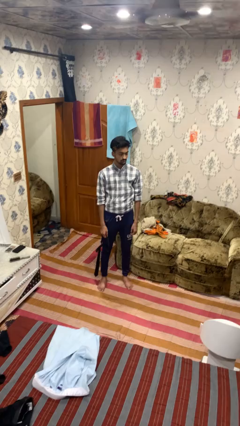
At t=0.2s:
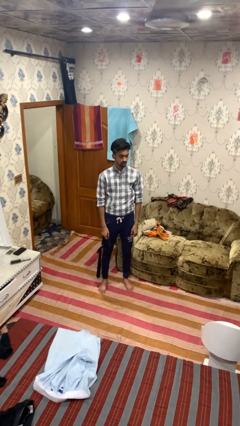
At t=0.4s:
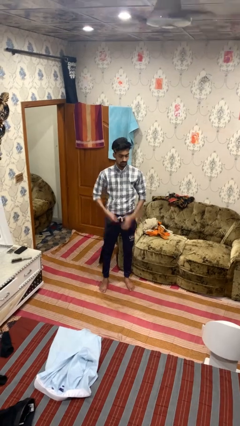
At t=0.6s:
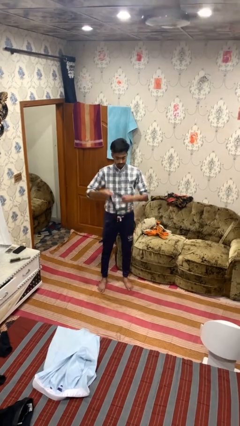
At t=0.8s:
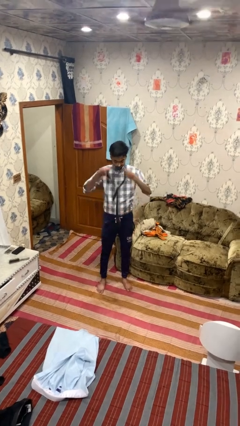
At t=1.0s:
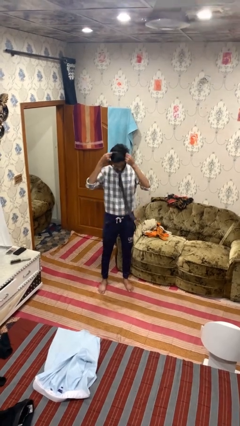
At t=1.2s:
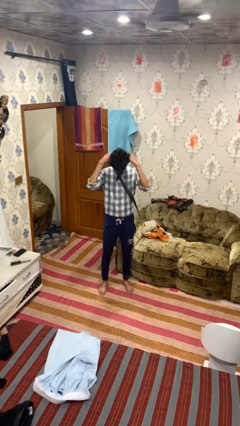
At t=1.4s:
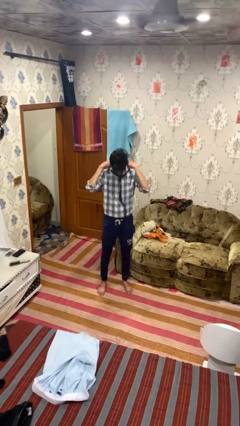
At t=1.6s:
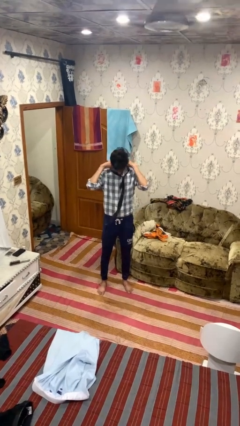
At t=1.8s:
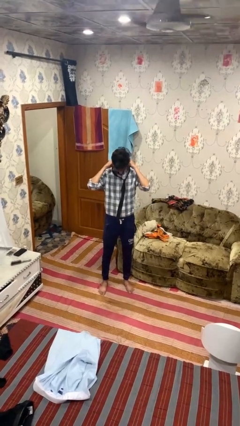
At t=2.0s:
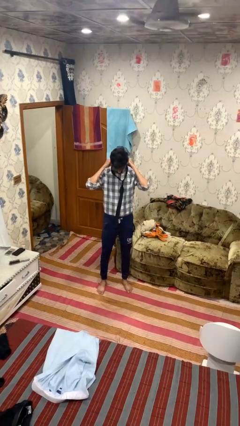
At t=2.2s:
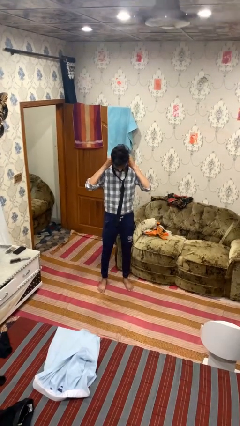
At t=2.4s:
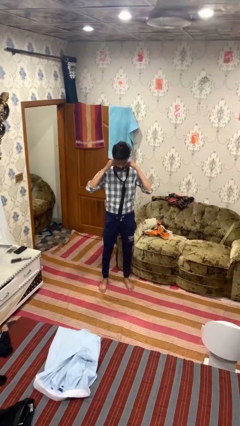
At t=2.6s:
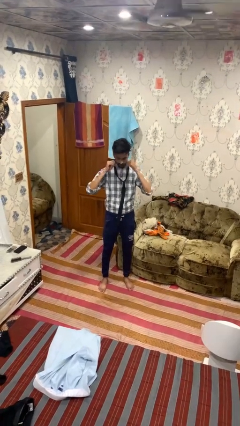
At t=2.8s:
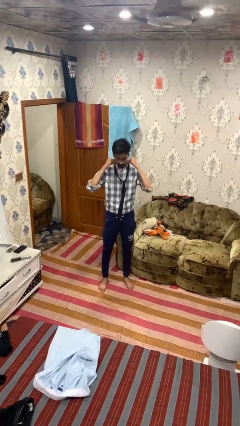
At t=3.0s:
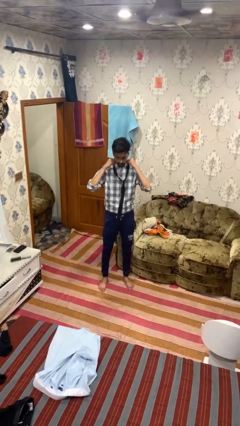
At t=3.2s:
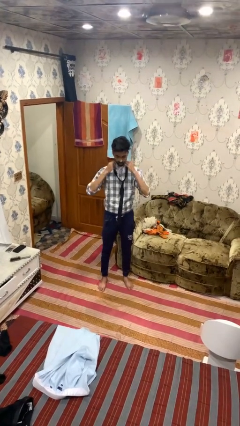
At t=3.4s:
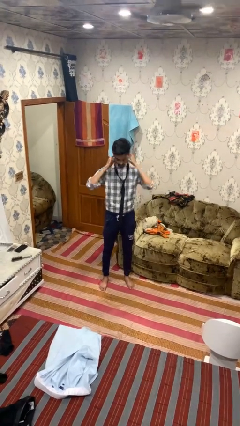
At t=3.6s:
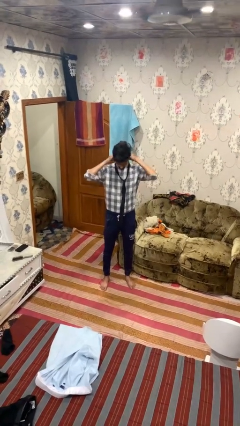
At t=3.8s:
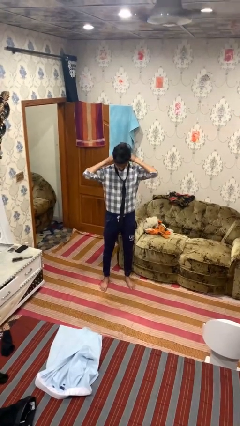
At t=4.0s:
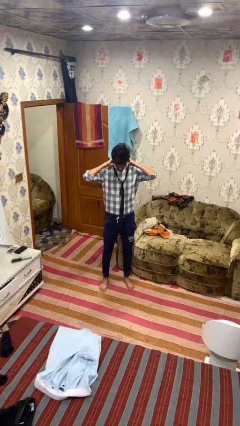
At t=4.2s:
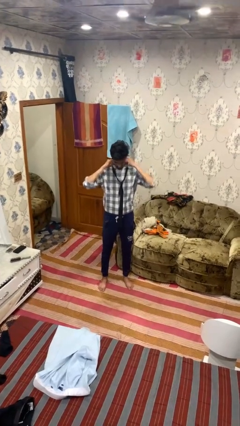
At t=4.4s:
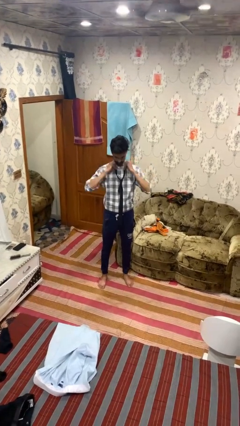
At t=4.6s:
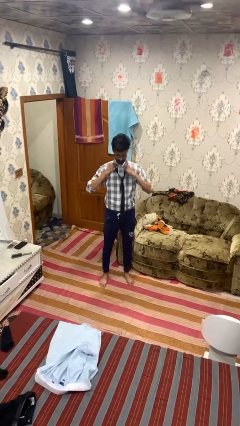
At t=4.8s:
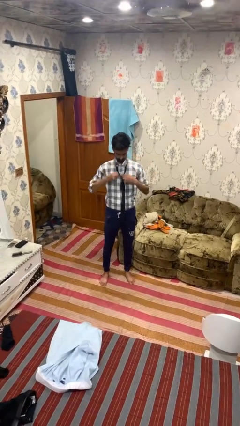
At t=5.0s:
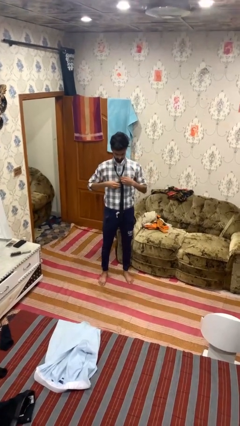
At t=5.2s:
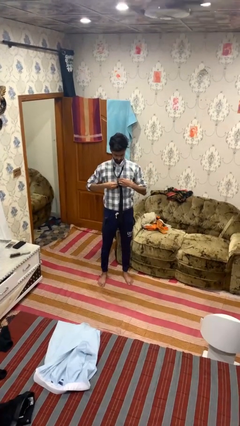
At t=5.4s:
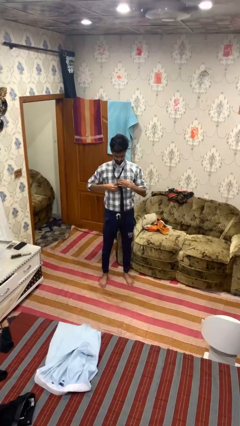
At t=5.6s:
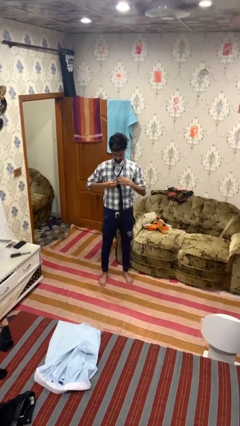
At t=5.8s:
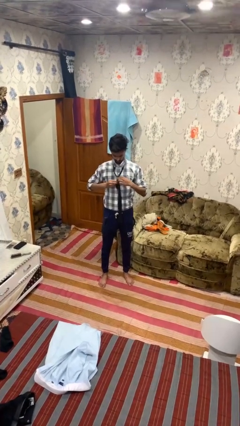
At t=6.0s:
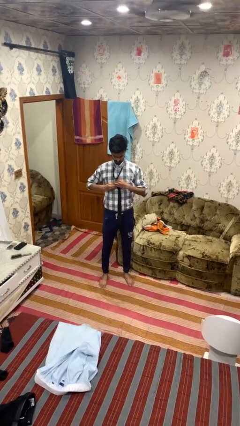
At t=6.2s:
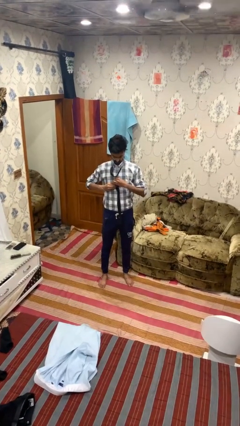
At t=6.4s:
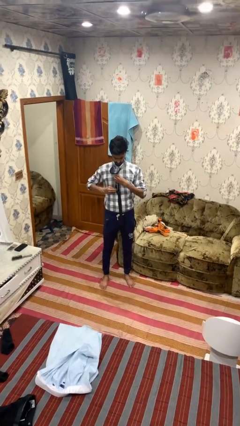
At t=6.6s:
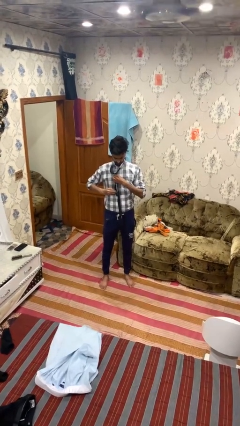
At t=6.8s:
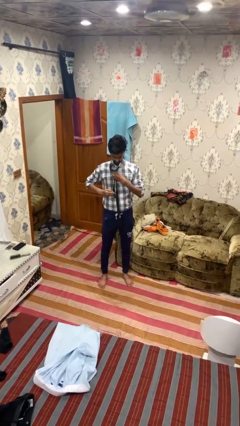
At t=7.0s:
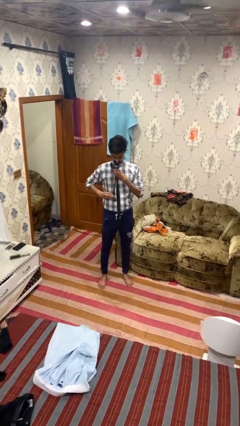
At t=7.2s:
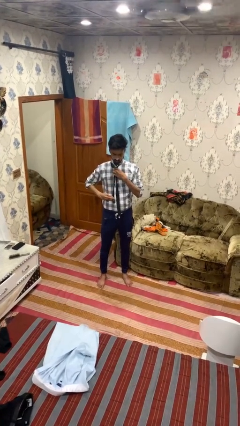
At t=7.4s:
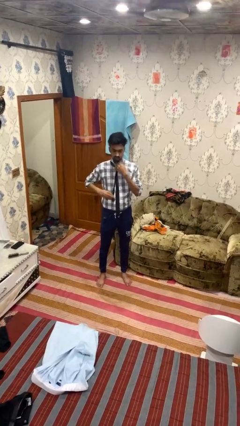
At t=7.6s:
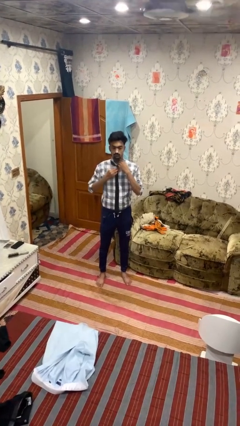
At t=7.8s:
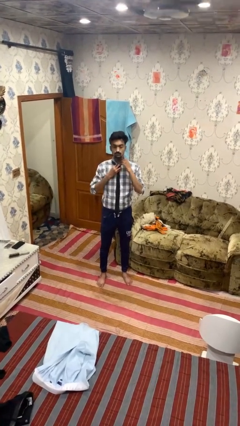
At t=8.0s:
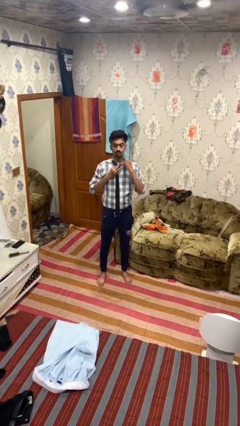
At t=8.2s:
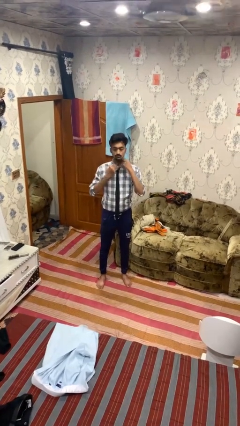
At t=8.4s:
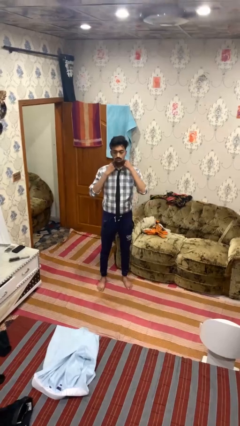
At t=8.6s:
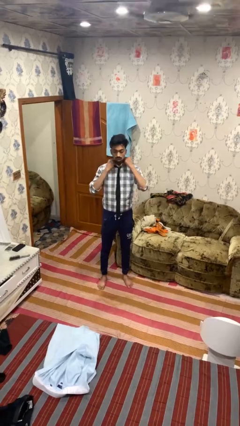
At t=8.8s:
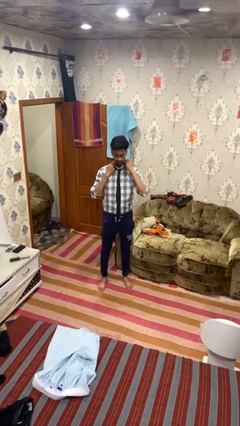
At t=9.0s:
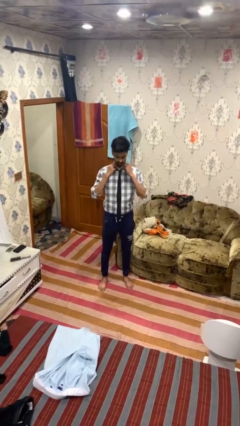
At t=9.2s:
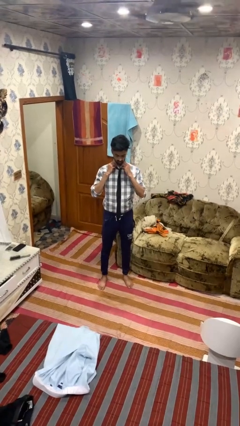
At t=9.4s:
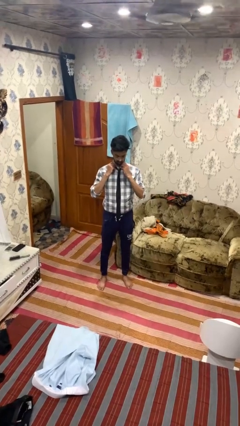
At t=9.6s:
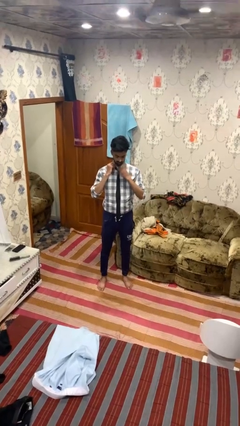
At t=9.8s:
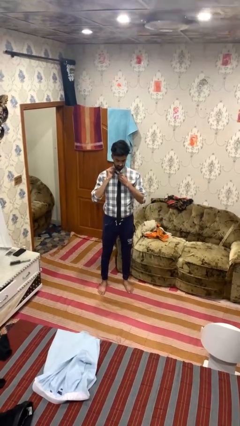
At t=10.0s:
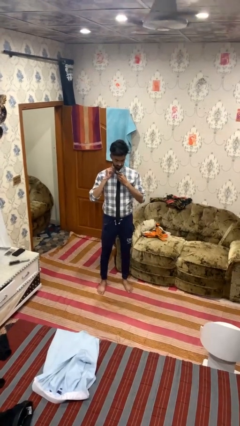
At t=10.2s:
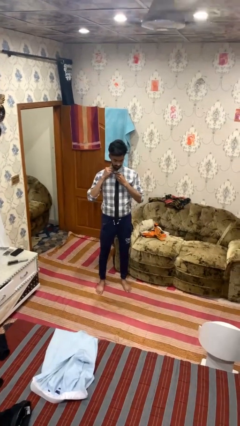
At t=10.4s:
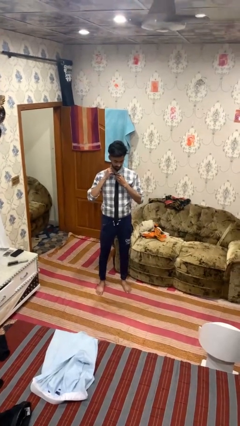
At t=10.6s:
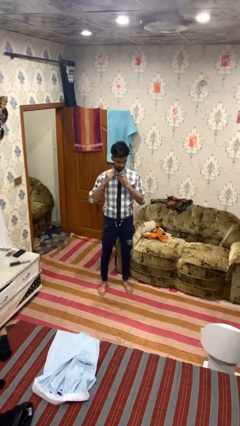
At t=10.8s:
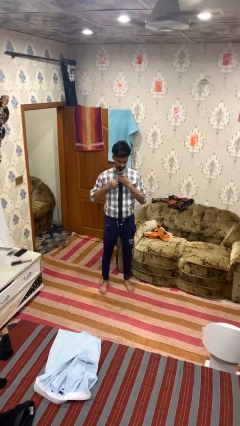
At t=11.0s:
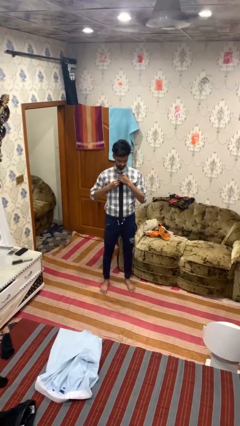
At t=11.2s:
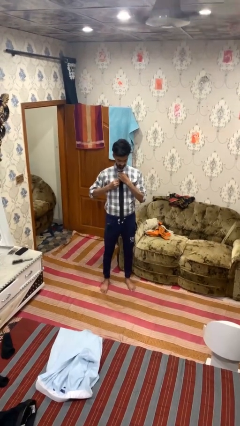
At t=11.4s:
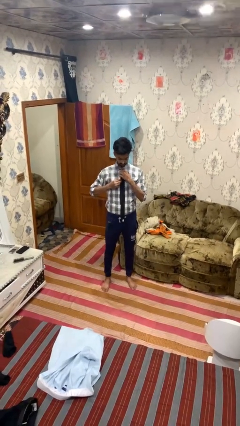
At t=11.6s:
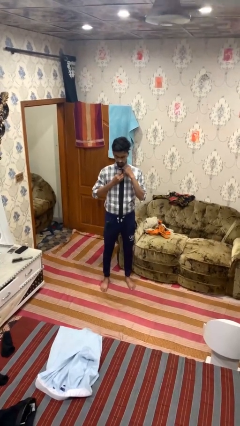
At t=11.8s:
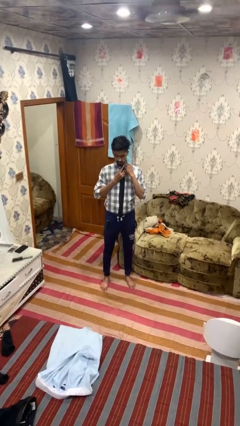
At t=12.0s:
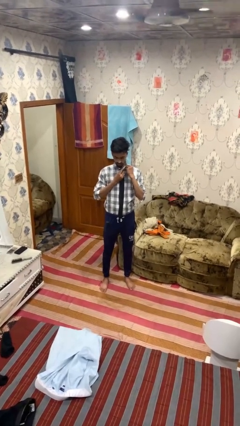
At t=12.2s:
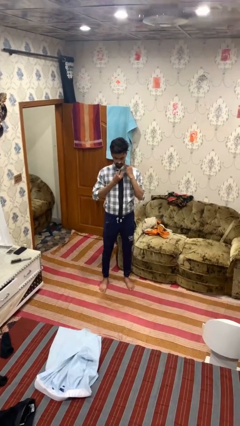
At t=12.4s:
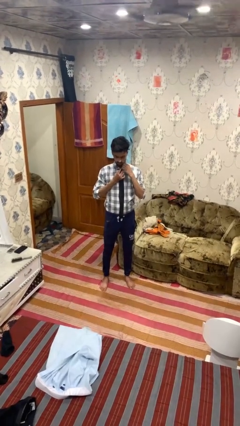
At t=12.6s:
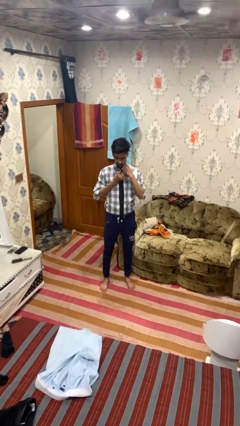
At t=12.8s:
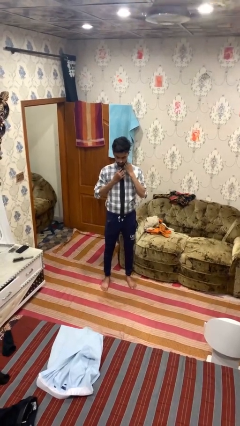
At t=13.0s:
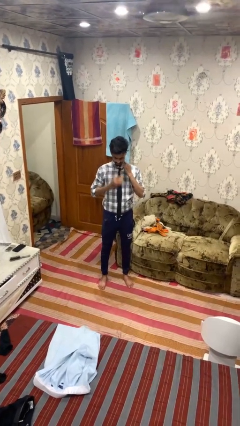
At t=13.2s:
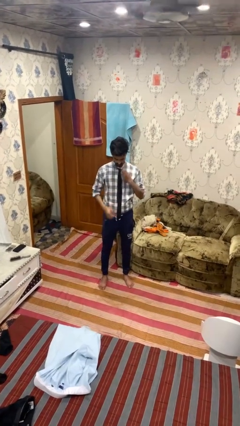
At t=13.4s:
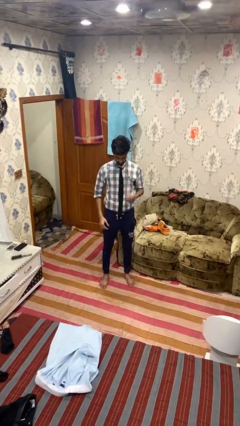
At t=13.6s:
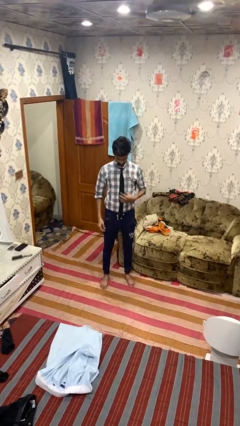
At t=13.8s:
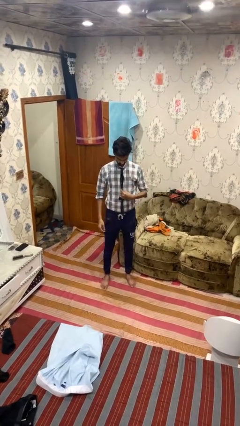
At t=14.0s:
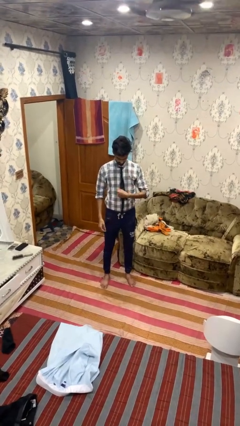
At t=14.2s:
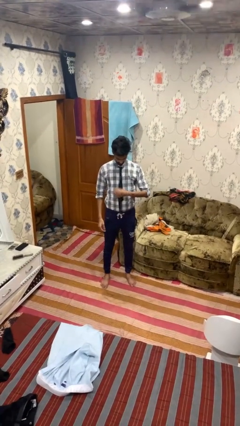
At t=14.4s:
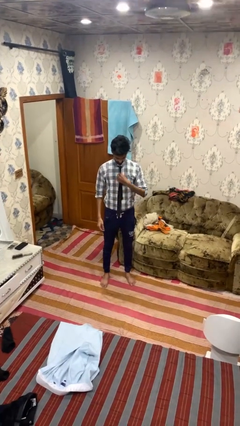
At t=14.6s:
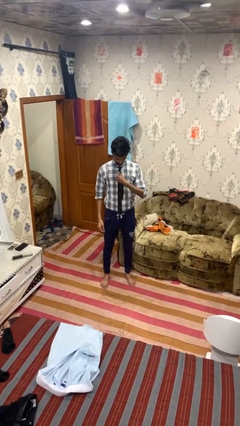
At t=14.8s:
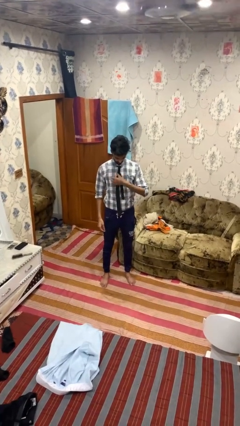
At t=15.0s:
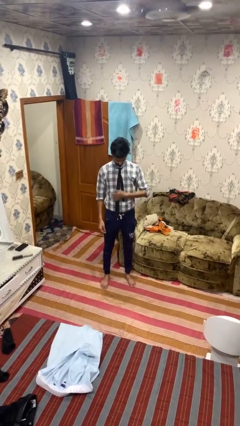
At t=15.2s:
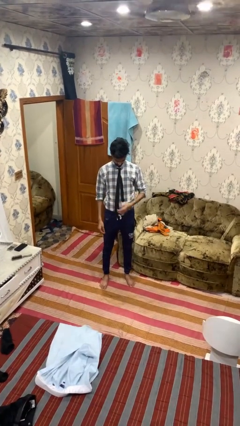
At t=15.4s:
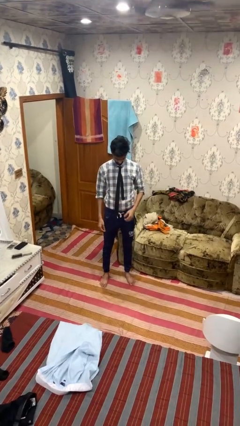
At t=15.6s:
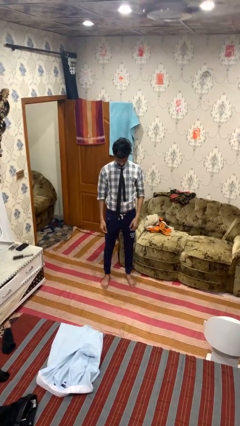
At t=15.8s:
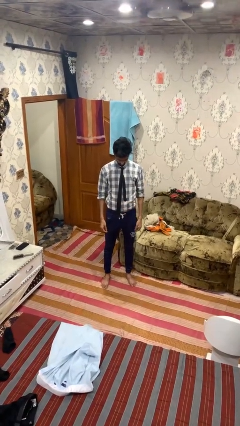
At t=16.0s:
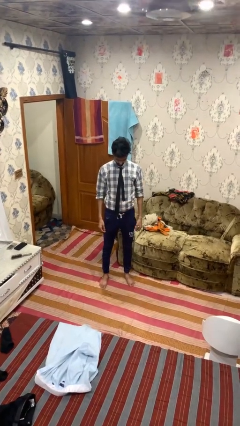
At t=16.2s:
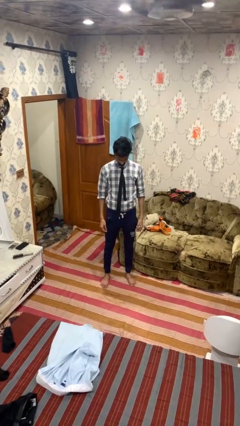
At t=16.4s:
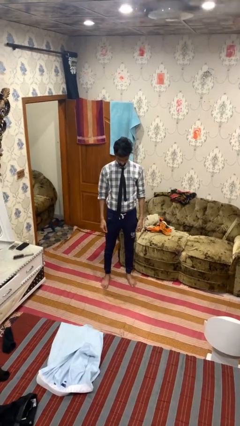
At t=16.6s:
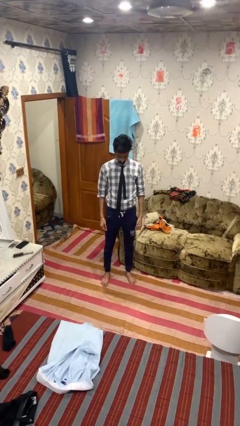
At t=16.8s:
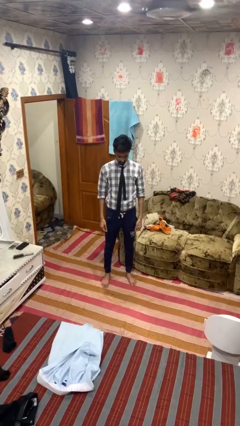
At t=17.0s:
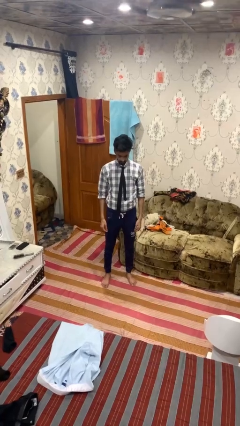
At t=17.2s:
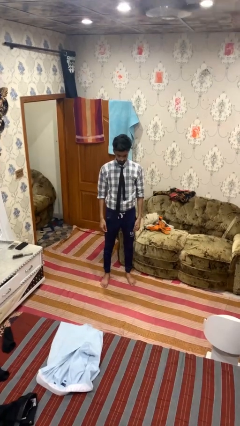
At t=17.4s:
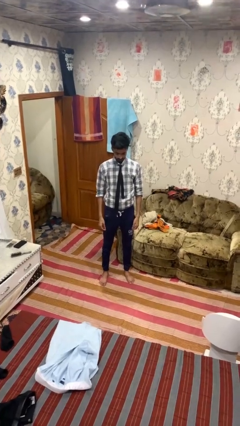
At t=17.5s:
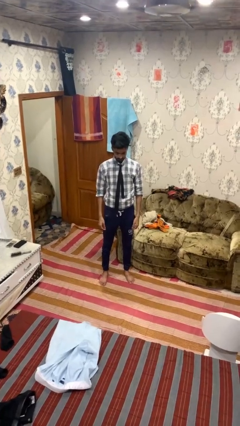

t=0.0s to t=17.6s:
person puts on necktie

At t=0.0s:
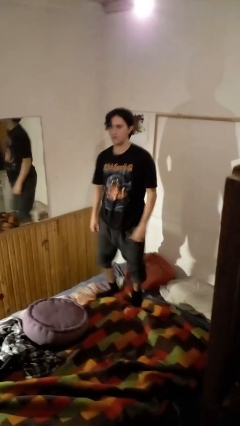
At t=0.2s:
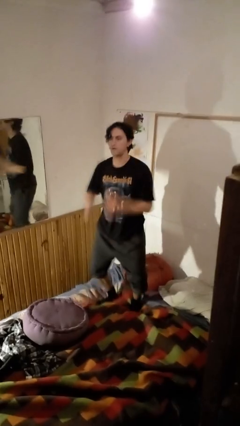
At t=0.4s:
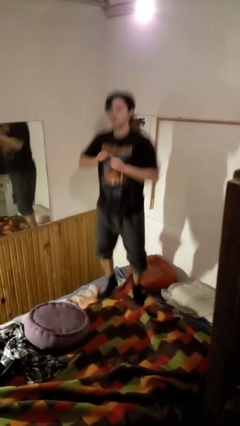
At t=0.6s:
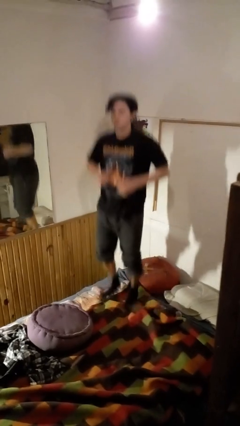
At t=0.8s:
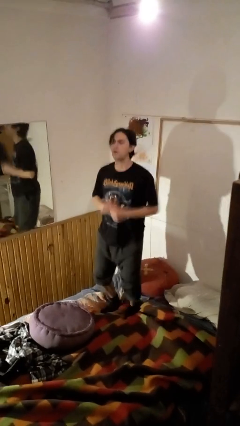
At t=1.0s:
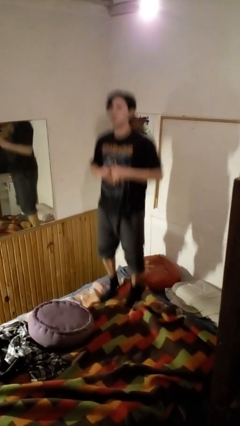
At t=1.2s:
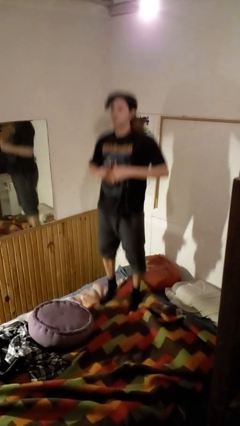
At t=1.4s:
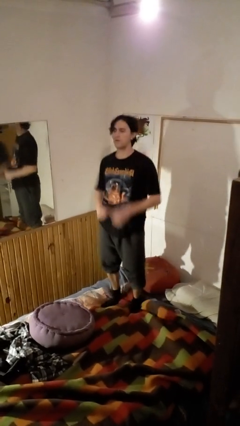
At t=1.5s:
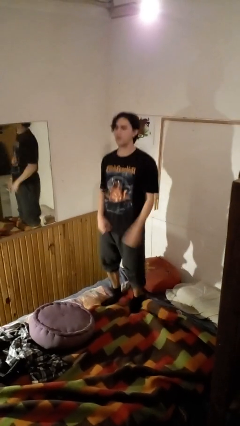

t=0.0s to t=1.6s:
person jumps on bed
